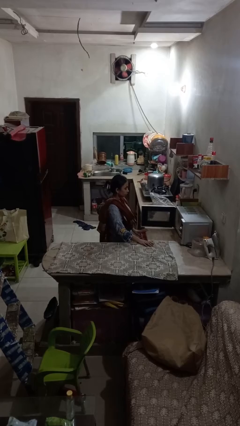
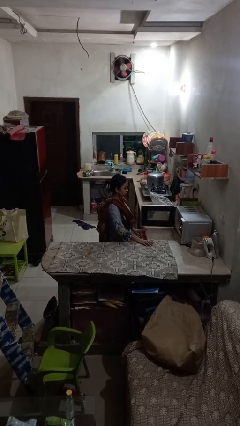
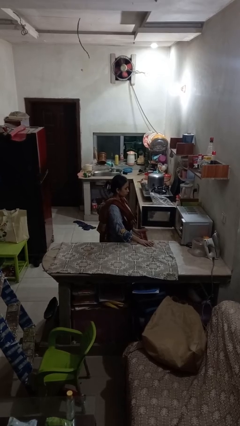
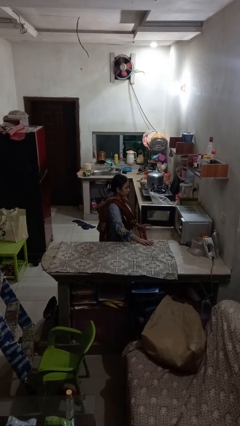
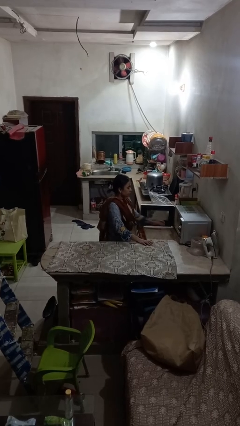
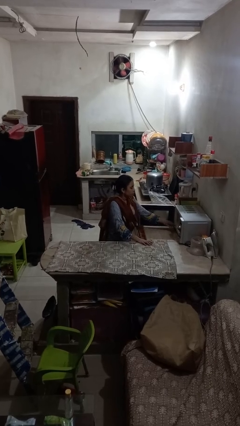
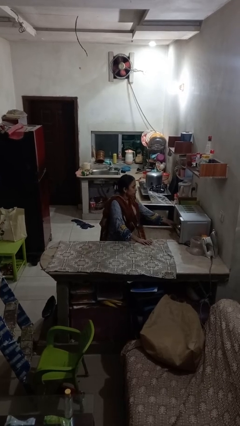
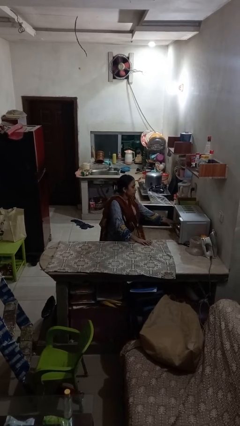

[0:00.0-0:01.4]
person takes object from microwave

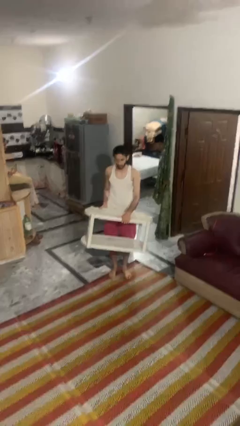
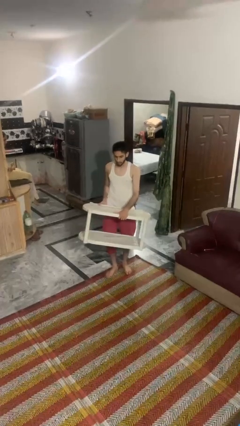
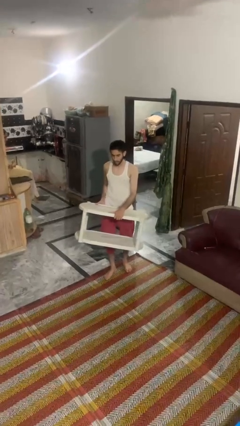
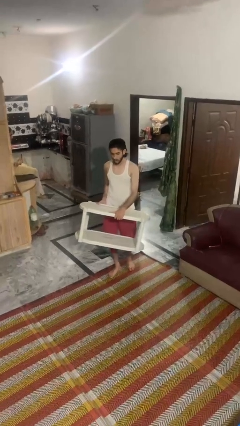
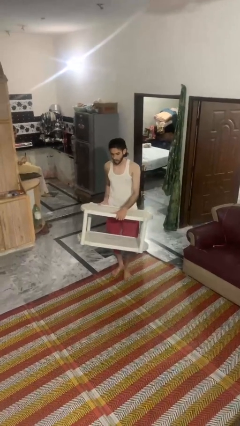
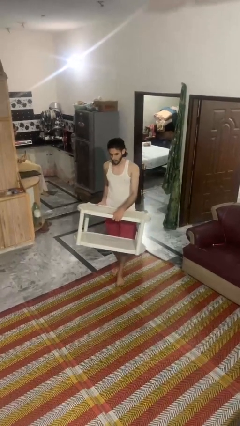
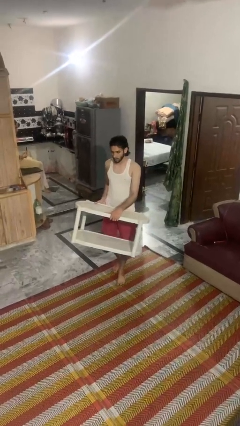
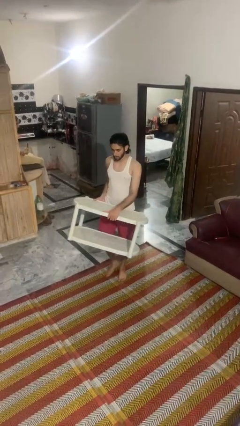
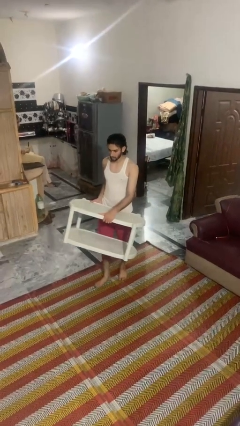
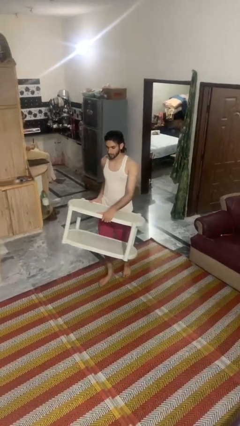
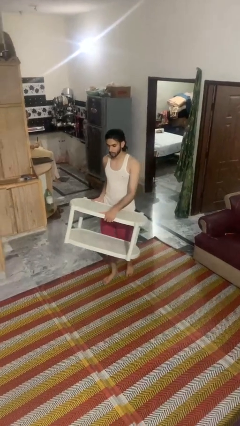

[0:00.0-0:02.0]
person carries furniture

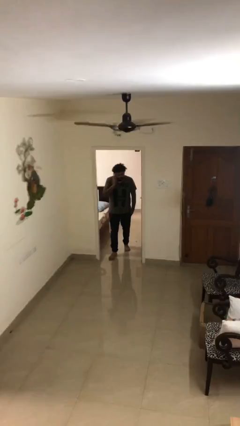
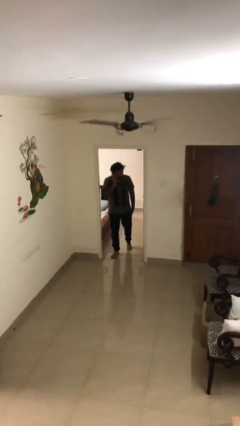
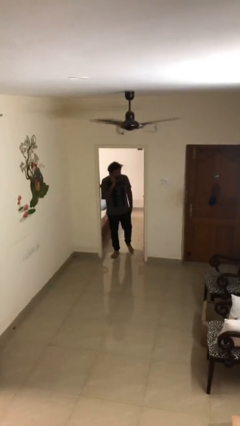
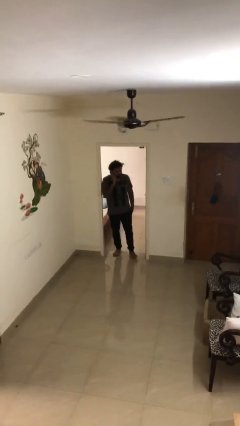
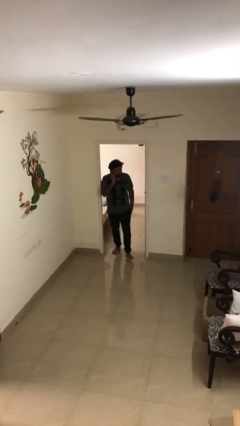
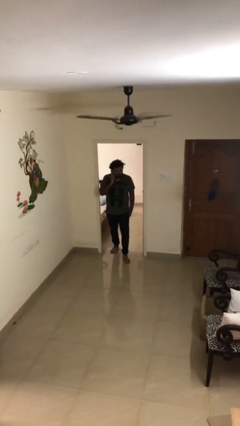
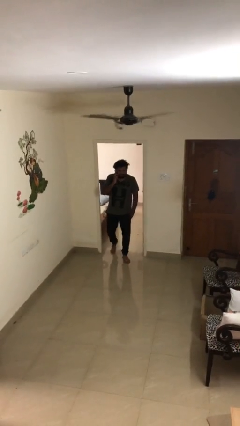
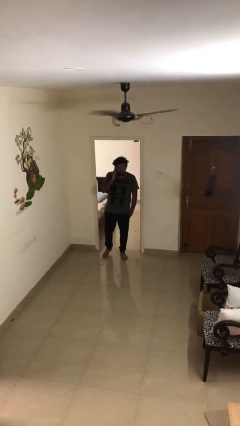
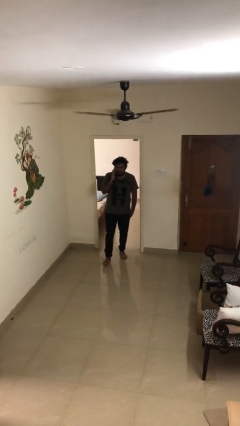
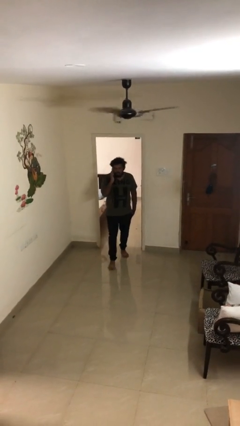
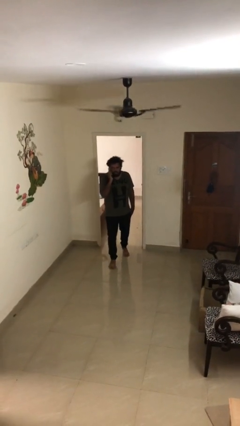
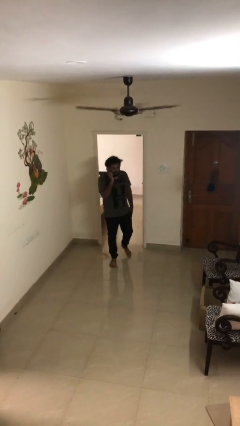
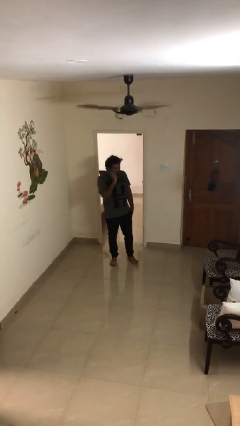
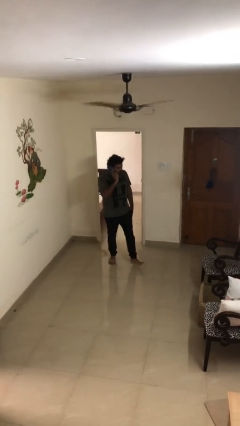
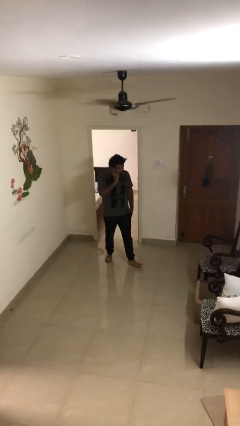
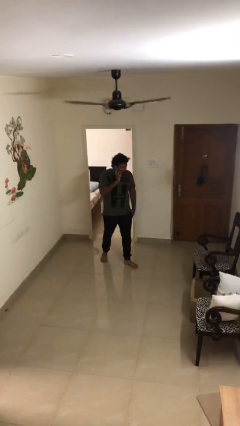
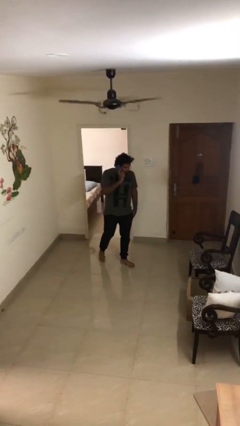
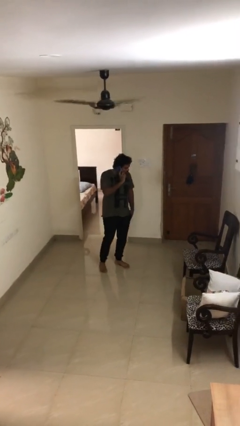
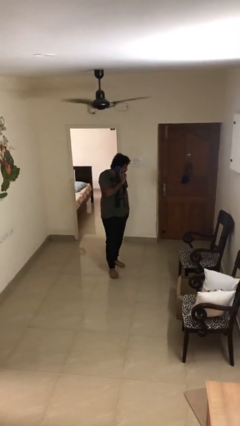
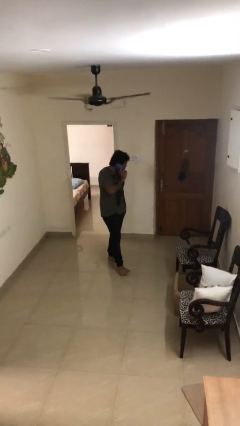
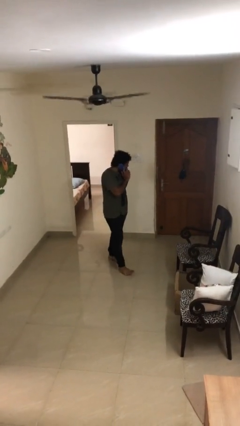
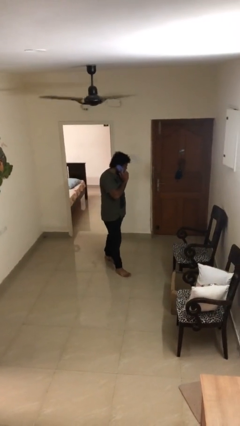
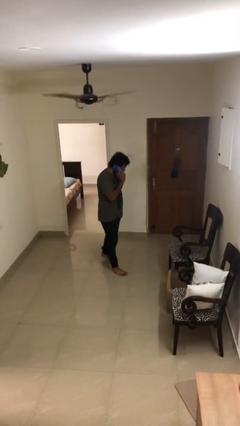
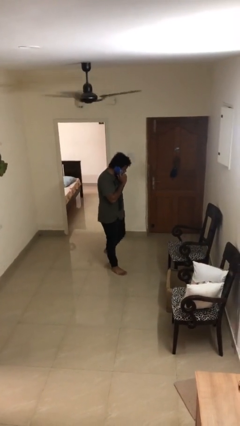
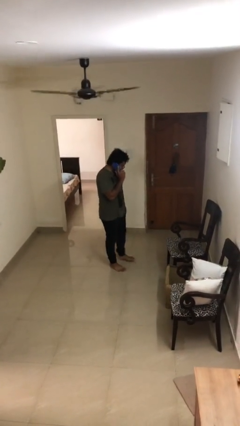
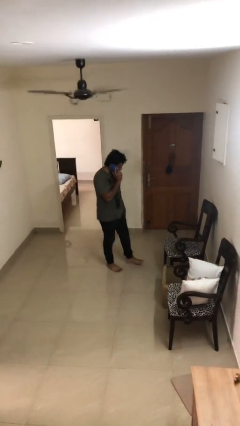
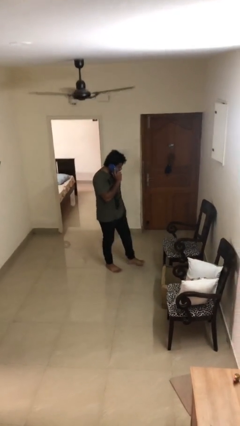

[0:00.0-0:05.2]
person enters scene through structure

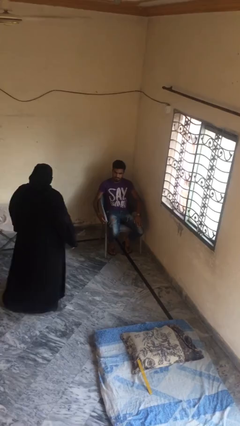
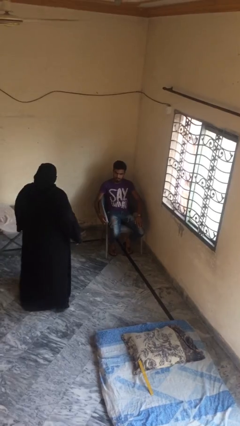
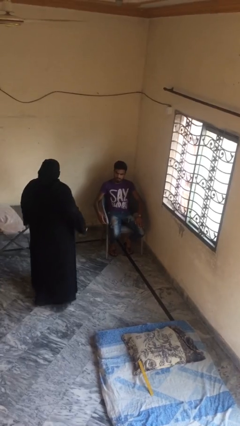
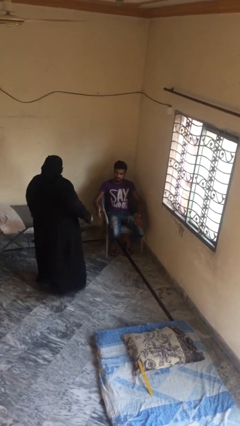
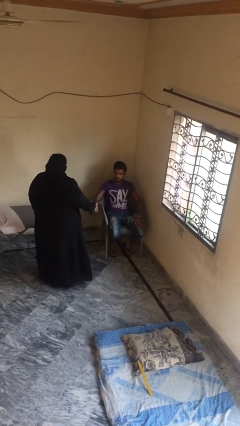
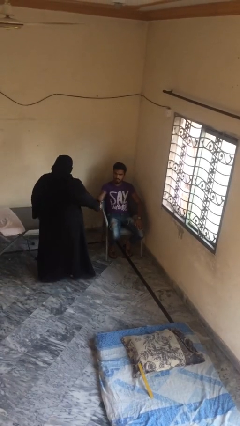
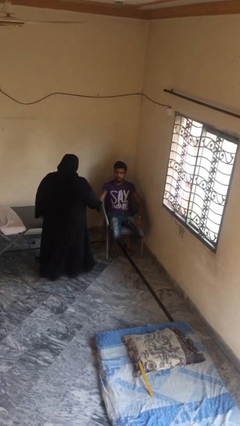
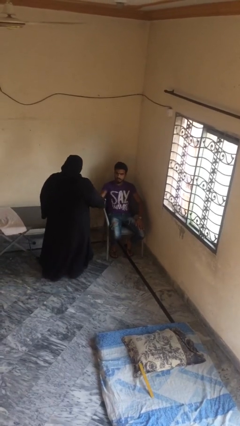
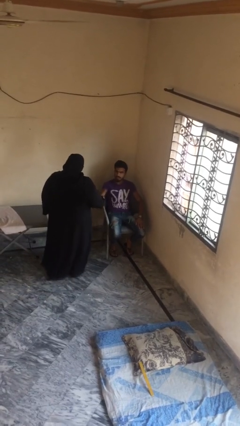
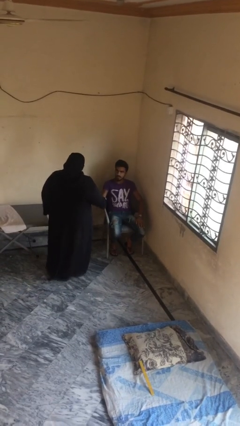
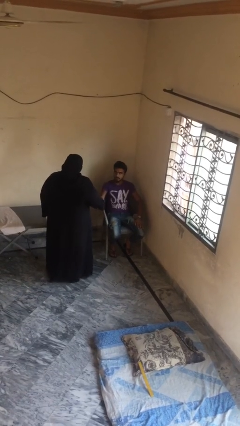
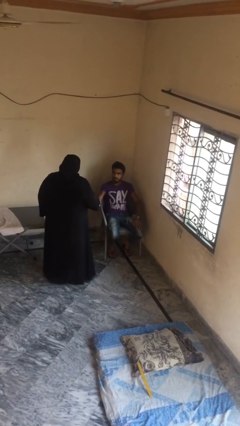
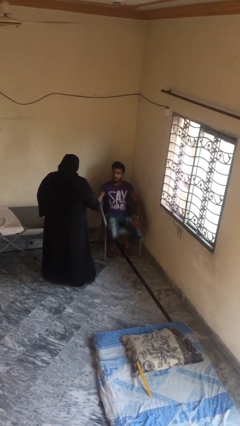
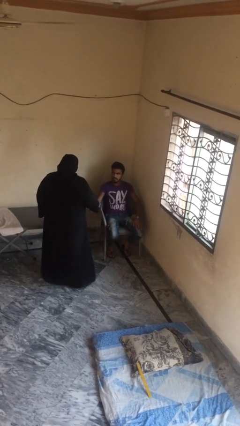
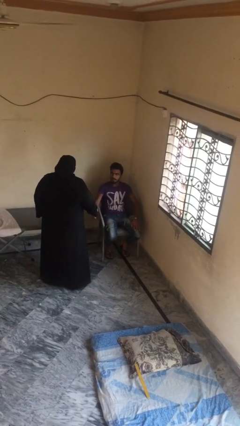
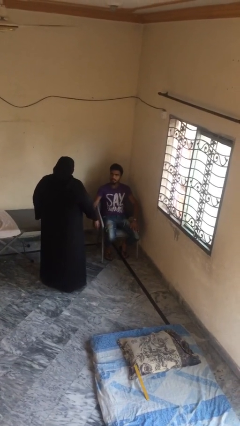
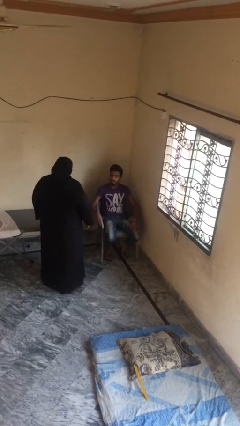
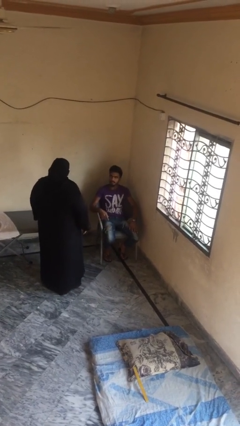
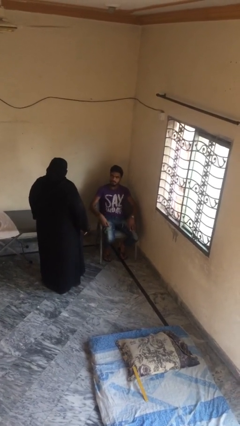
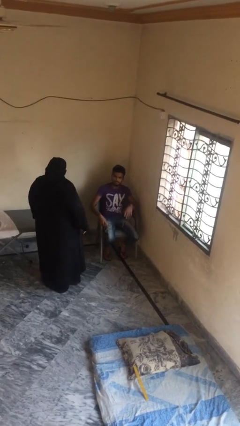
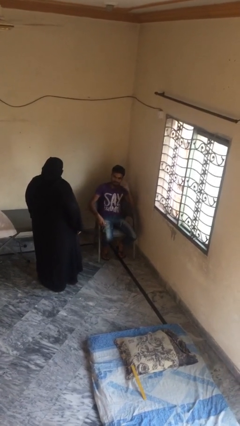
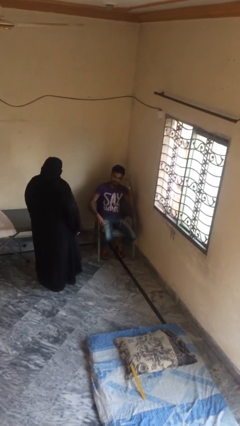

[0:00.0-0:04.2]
person shakes hand

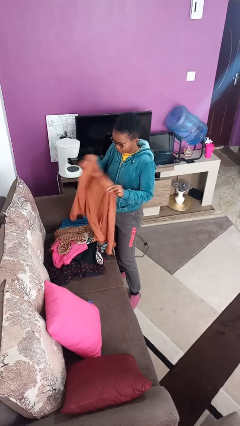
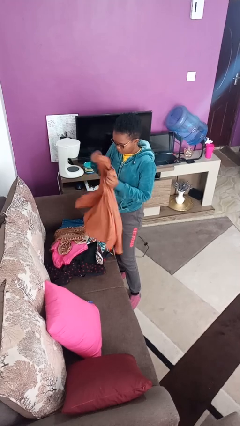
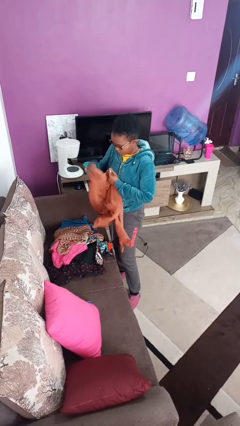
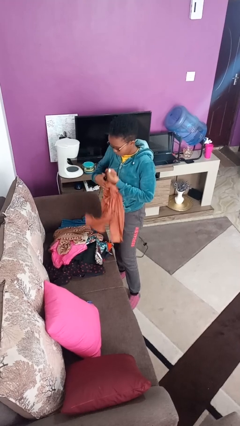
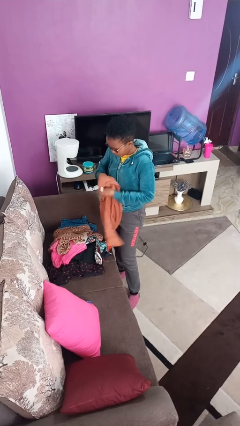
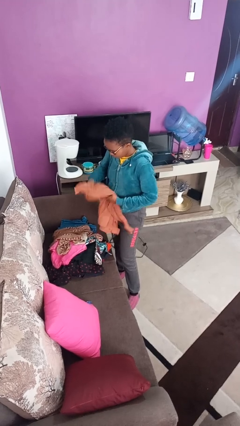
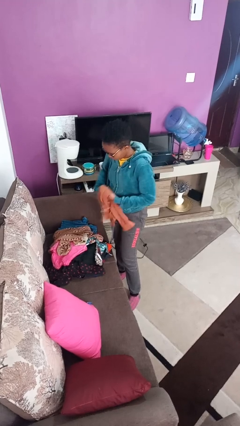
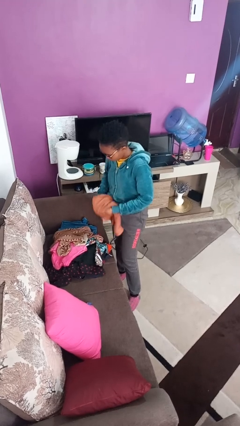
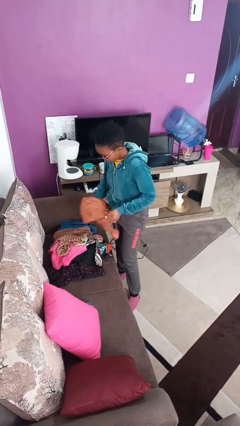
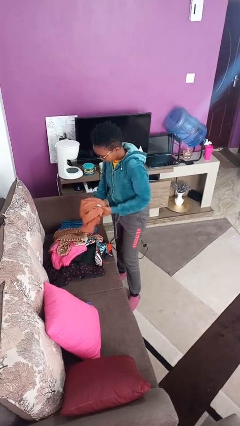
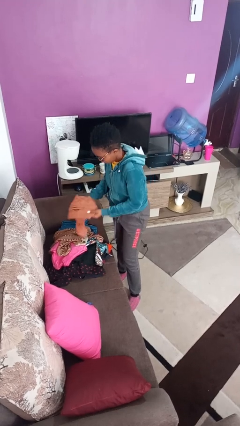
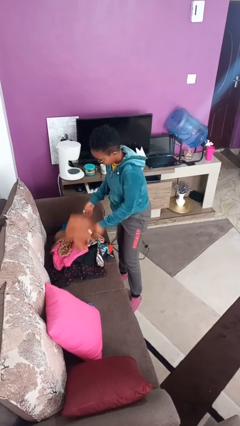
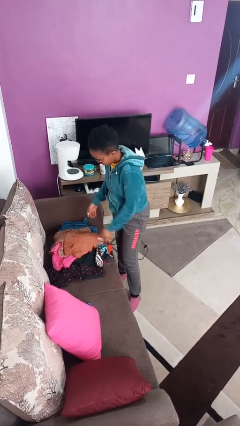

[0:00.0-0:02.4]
person folds shirt

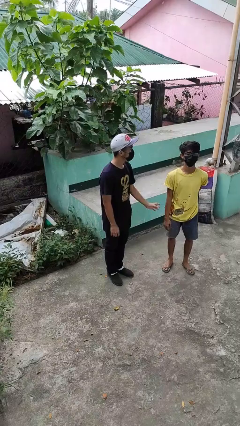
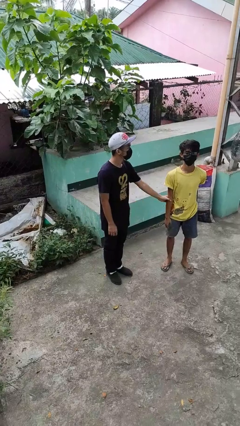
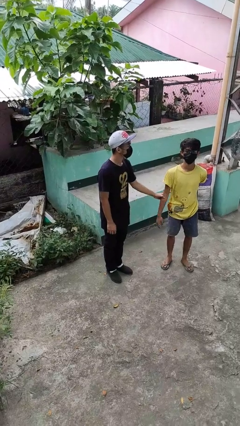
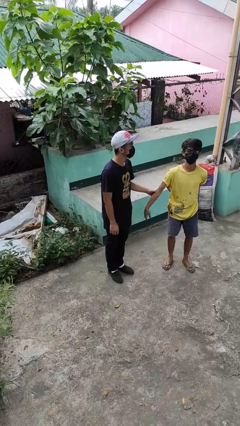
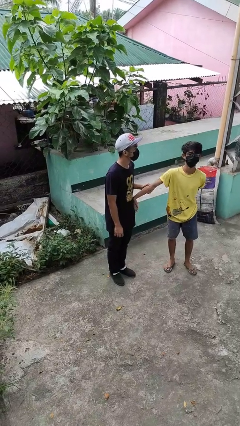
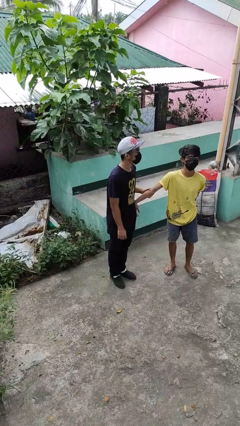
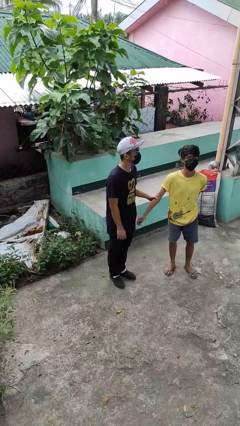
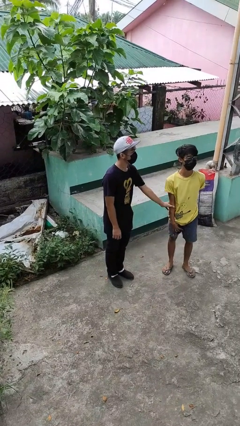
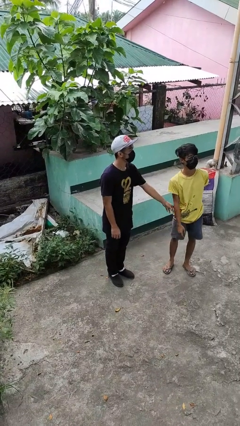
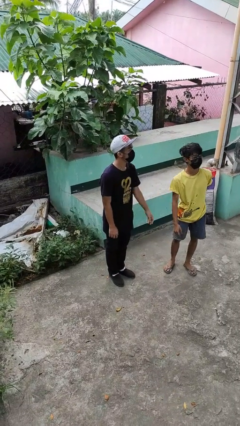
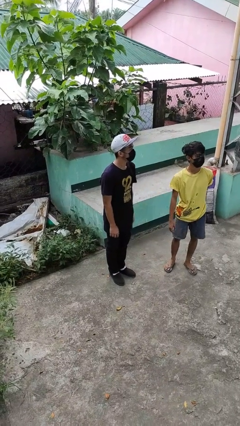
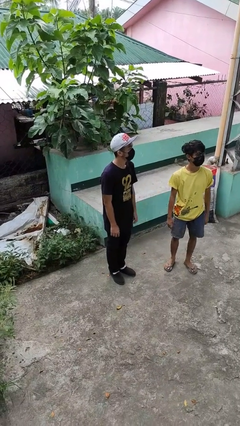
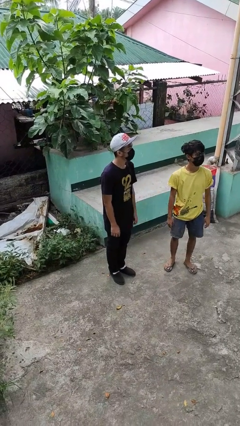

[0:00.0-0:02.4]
person grabs person by forearm
